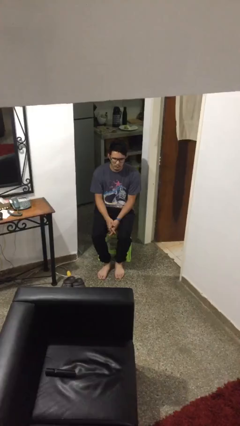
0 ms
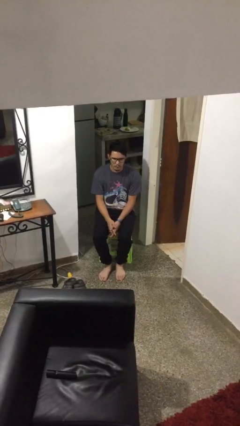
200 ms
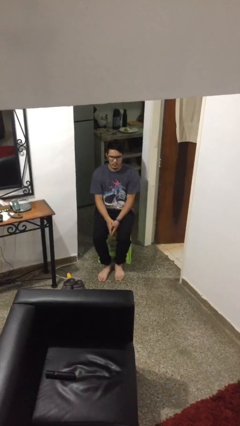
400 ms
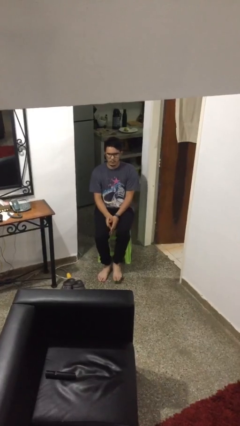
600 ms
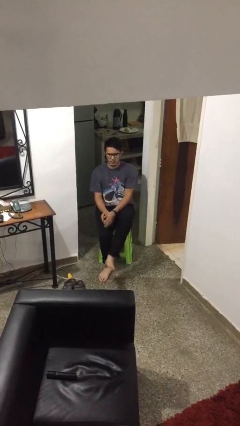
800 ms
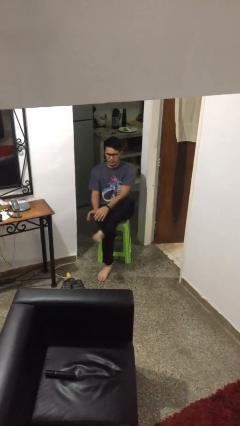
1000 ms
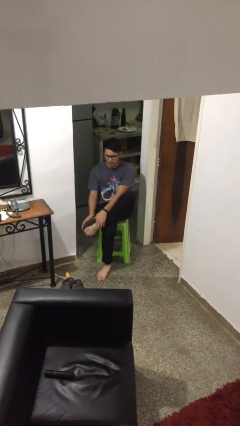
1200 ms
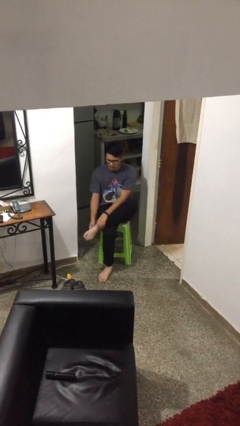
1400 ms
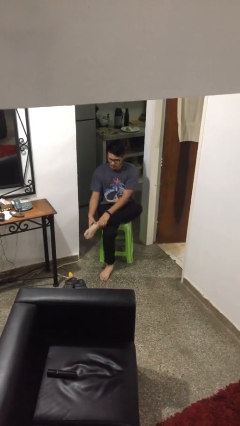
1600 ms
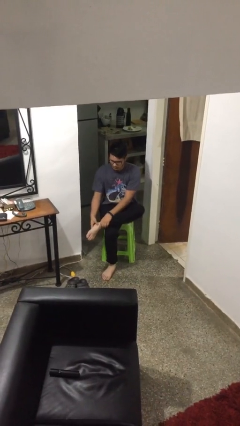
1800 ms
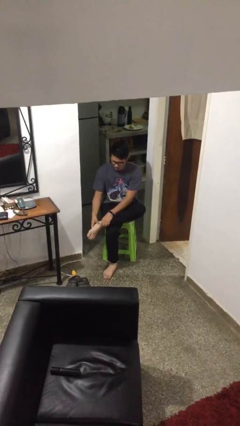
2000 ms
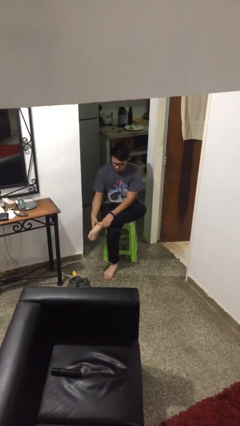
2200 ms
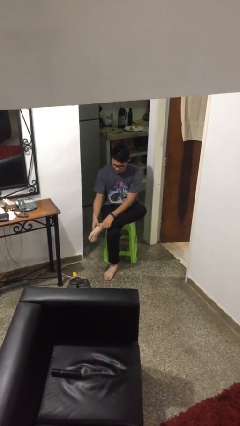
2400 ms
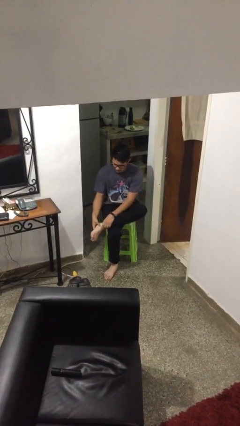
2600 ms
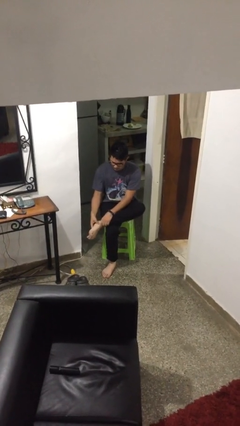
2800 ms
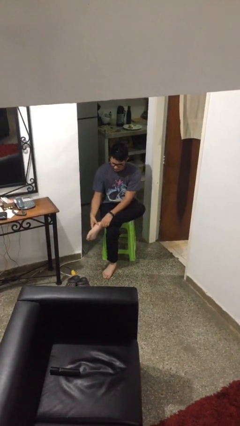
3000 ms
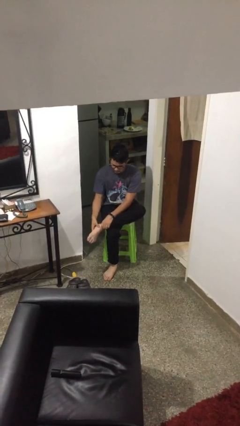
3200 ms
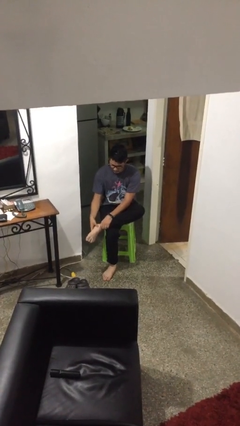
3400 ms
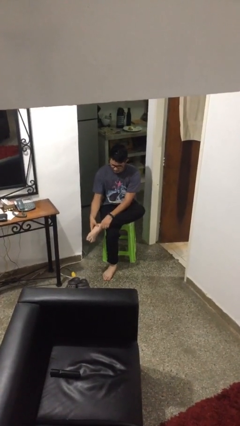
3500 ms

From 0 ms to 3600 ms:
person rubs foot

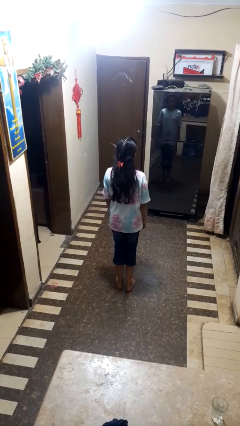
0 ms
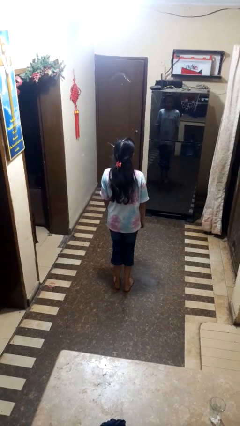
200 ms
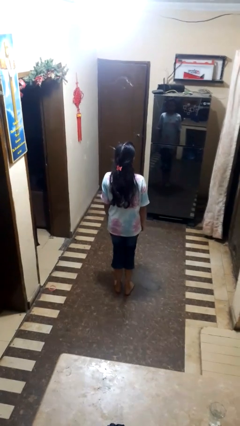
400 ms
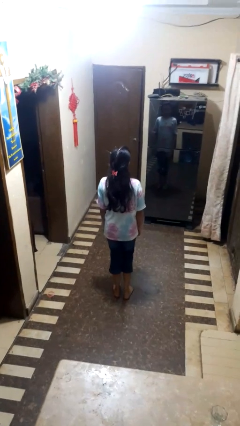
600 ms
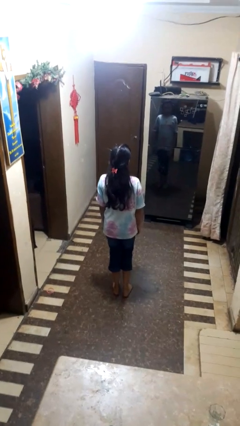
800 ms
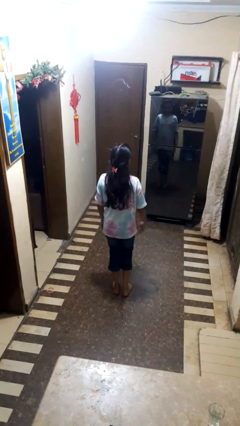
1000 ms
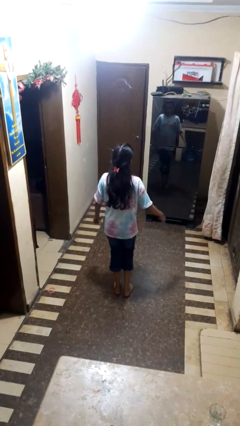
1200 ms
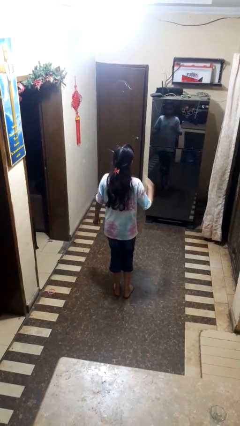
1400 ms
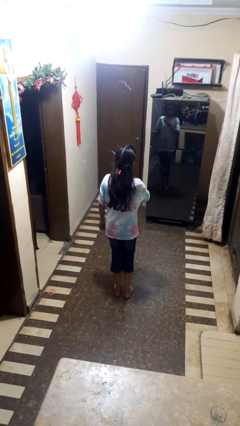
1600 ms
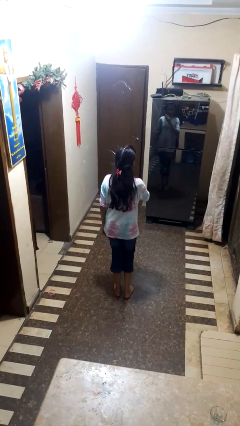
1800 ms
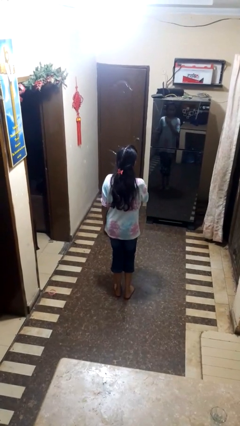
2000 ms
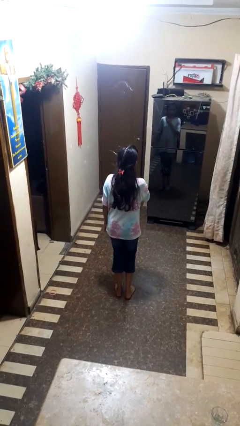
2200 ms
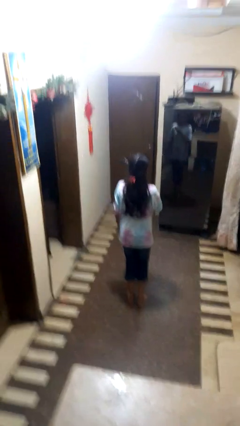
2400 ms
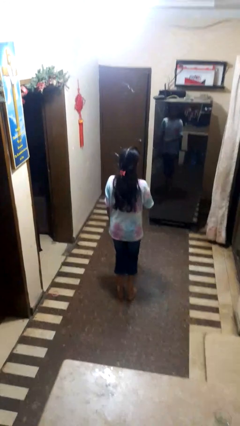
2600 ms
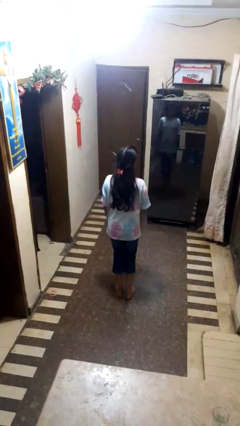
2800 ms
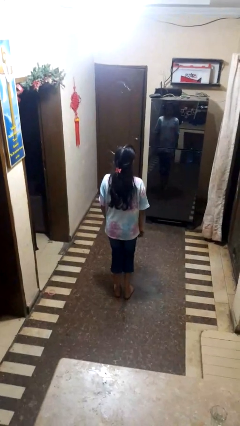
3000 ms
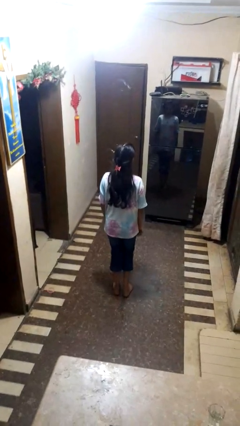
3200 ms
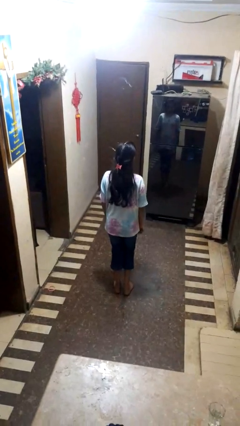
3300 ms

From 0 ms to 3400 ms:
person drums on chest

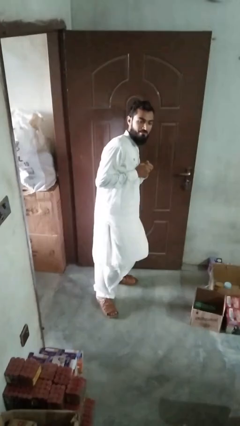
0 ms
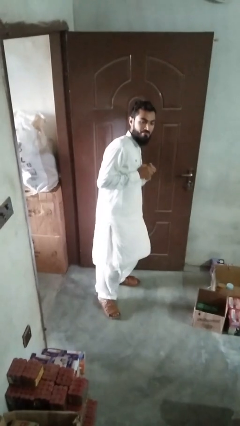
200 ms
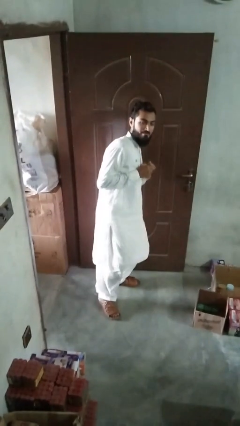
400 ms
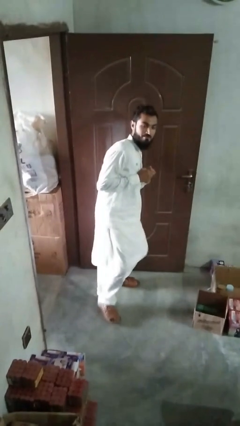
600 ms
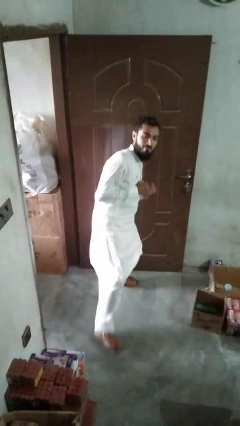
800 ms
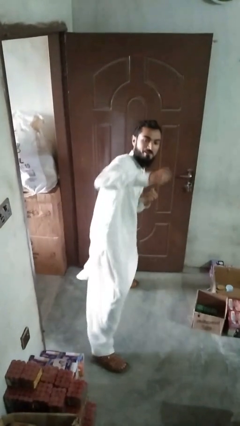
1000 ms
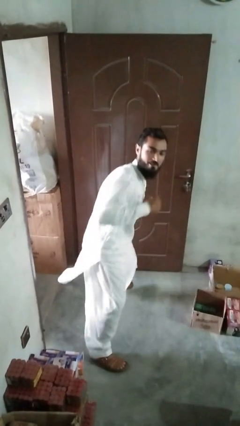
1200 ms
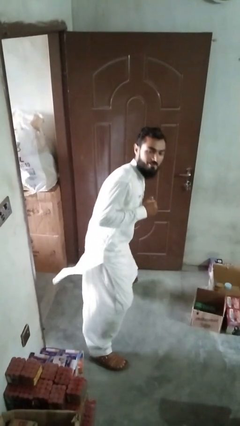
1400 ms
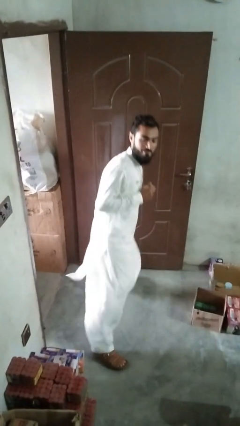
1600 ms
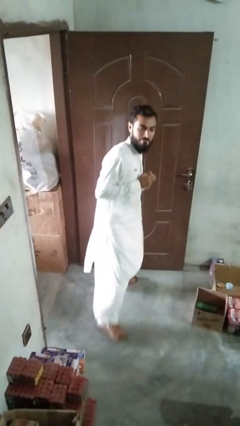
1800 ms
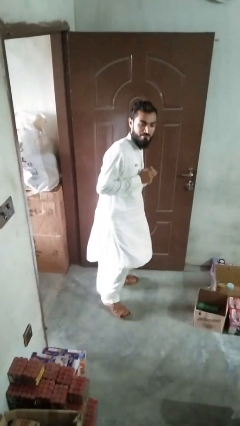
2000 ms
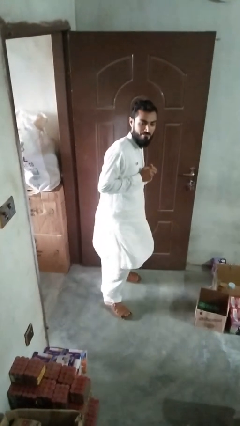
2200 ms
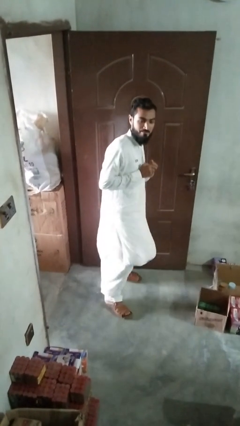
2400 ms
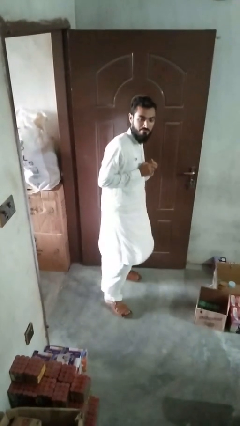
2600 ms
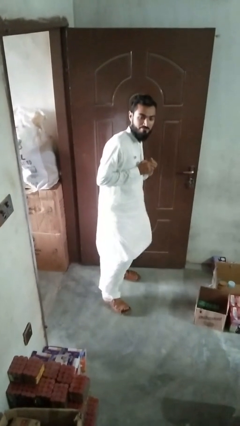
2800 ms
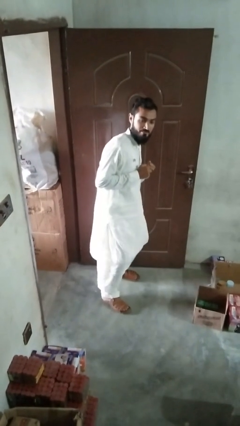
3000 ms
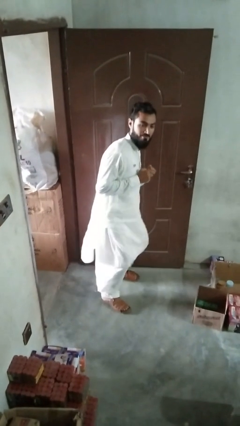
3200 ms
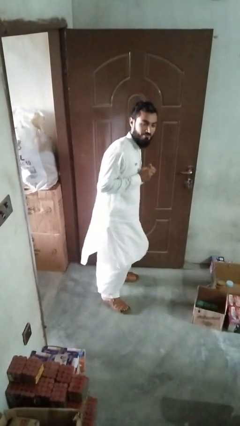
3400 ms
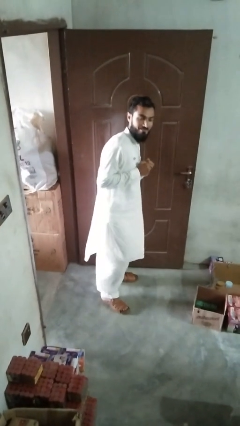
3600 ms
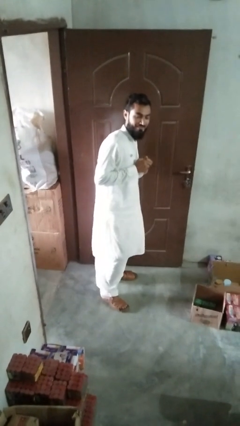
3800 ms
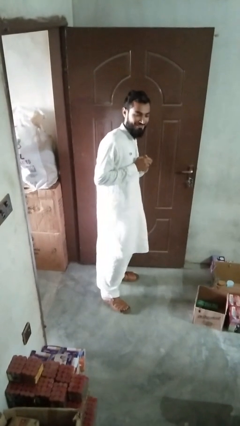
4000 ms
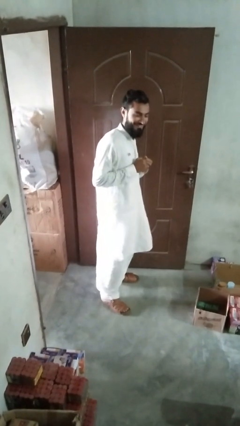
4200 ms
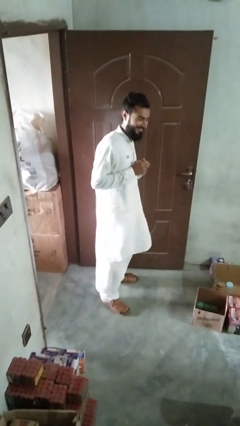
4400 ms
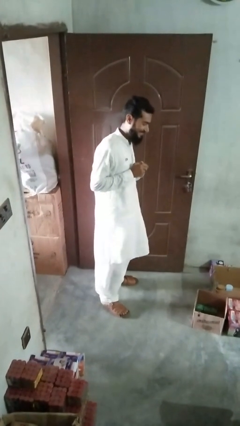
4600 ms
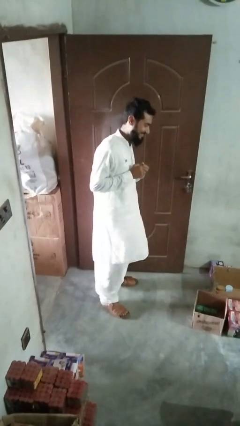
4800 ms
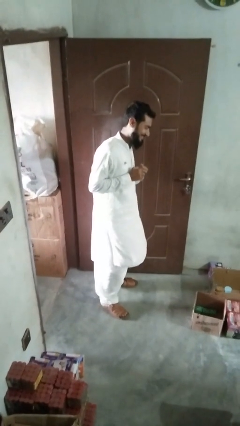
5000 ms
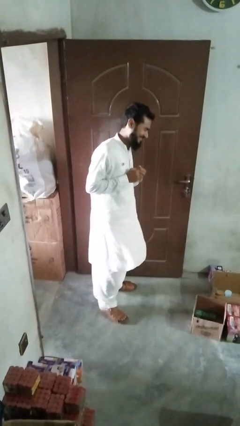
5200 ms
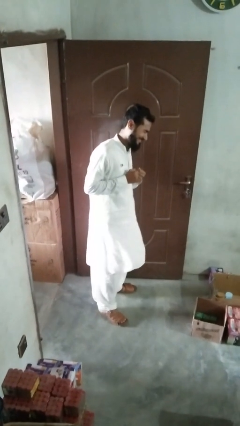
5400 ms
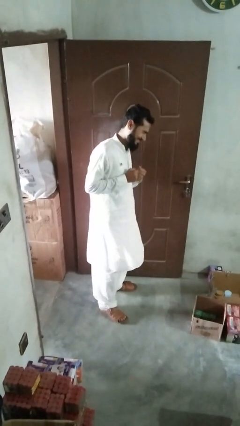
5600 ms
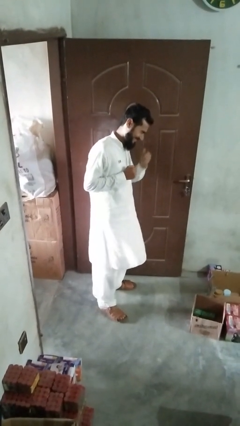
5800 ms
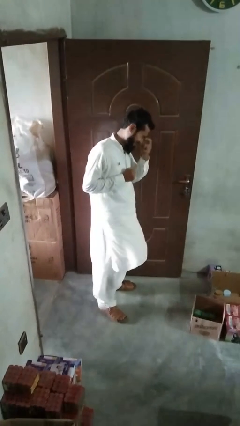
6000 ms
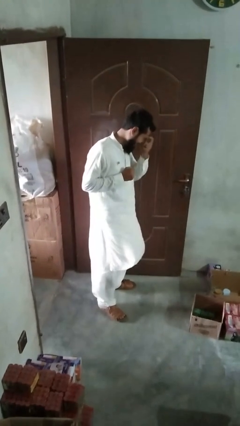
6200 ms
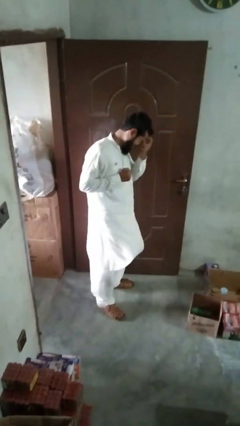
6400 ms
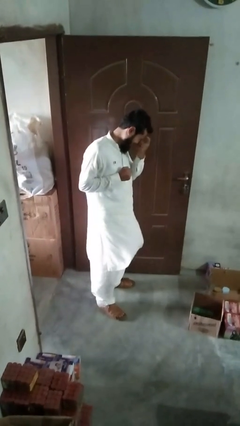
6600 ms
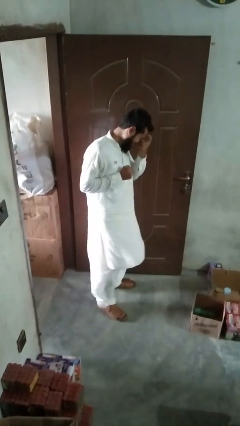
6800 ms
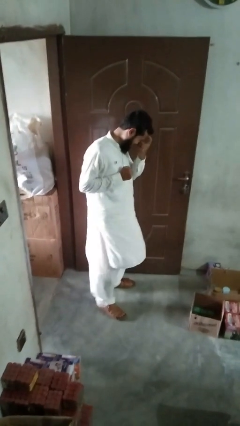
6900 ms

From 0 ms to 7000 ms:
person karate chop

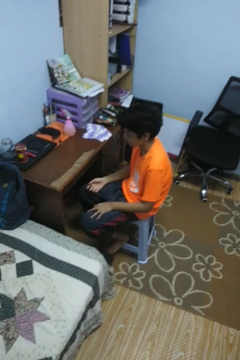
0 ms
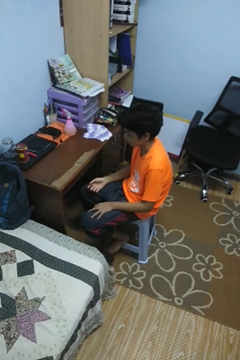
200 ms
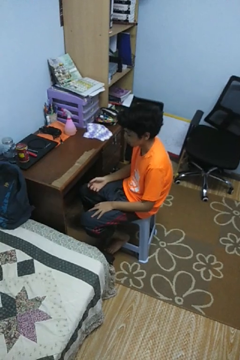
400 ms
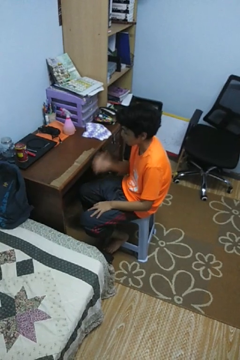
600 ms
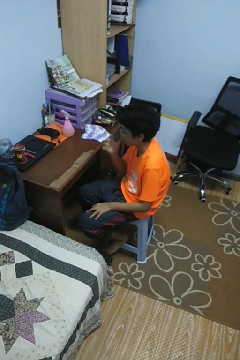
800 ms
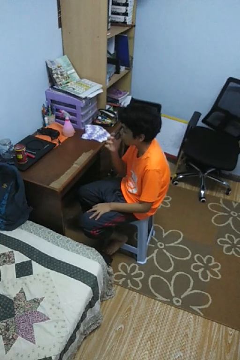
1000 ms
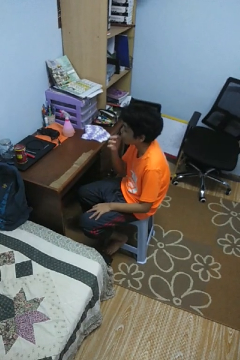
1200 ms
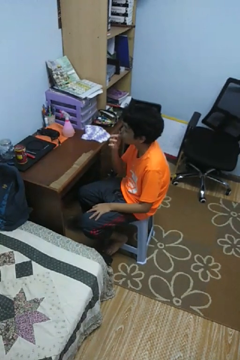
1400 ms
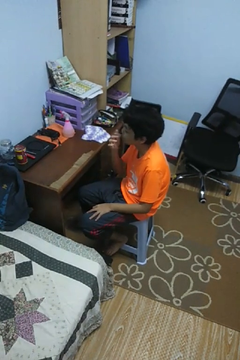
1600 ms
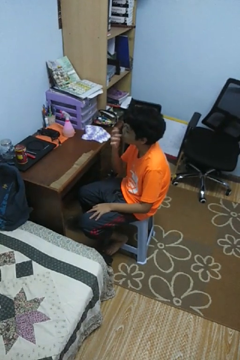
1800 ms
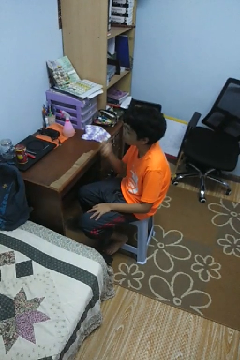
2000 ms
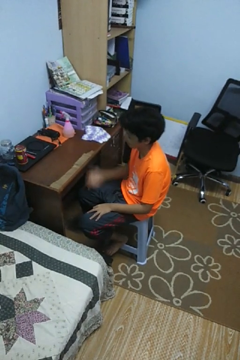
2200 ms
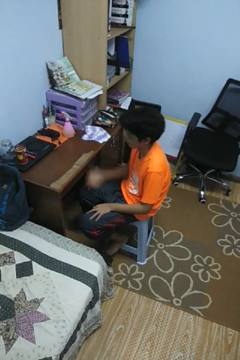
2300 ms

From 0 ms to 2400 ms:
person licks fingers

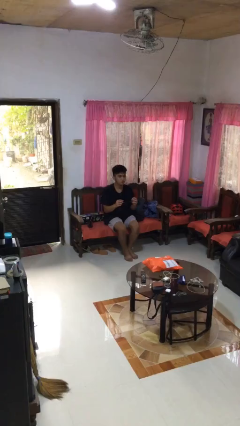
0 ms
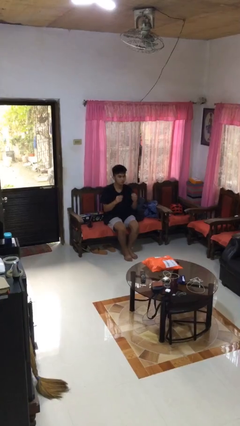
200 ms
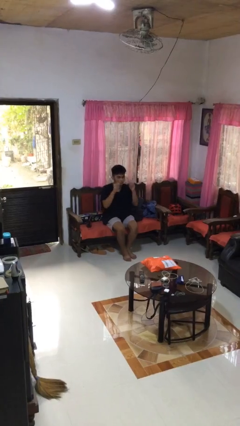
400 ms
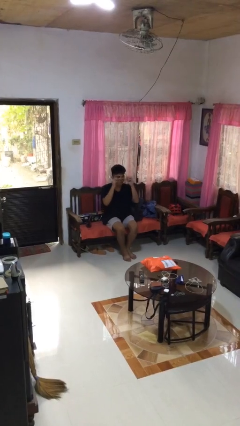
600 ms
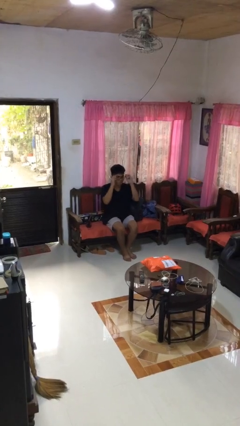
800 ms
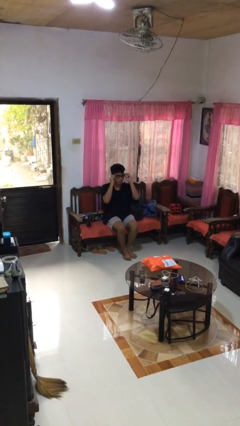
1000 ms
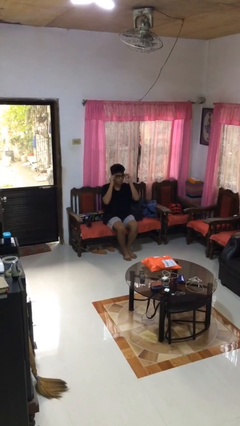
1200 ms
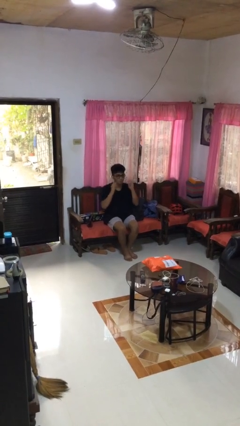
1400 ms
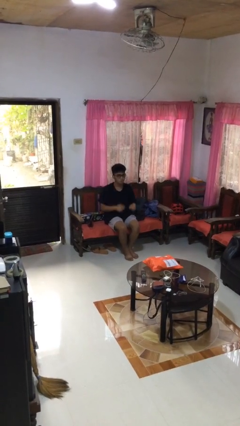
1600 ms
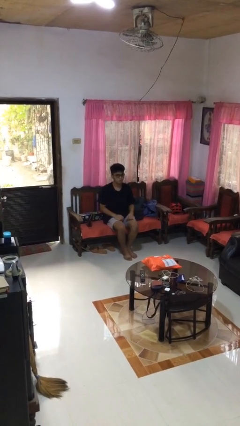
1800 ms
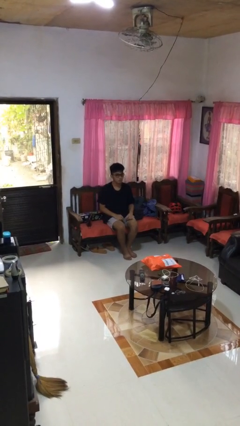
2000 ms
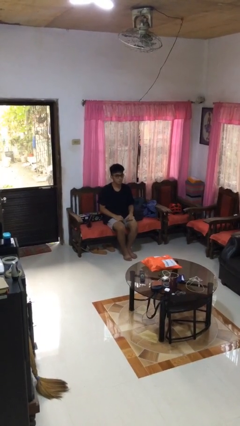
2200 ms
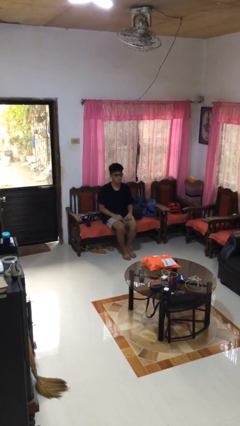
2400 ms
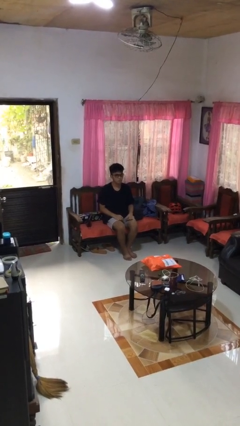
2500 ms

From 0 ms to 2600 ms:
person puts on glasses
